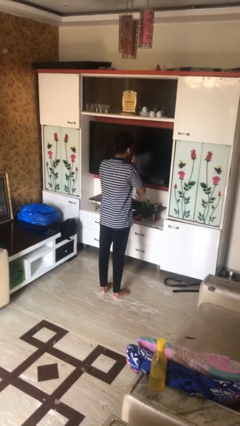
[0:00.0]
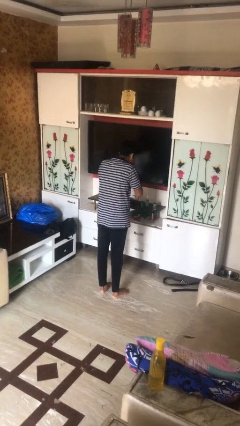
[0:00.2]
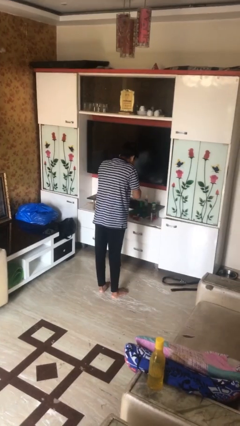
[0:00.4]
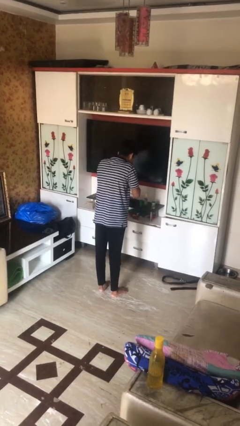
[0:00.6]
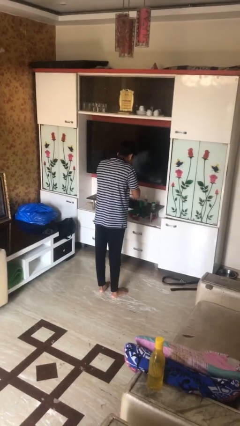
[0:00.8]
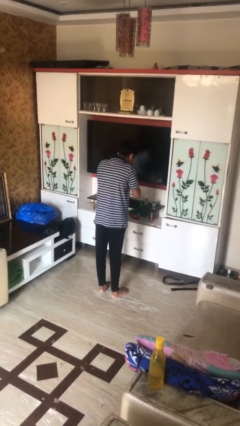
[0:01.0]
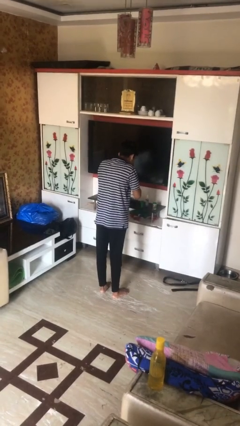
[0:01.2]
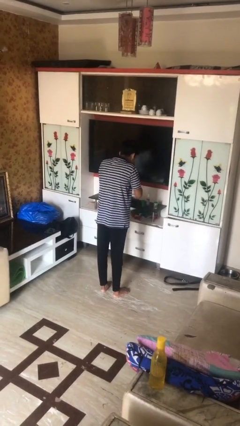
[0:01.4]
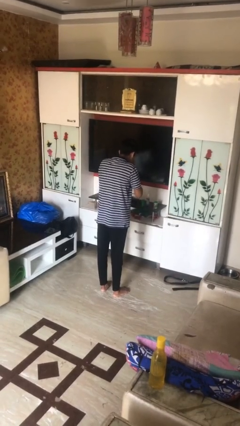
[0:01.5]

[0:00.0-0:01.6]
person sneezes into hand

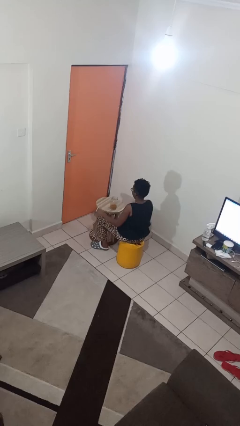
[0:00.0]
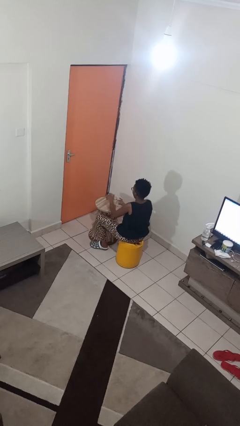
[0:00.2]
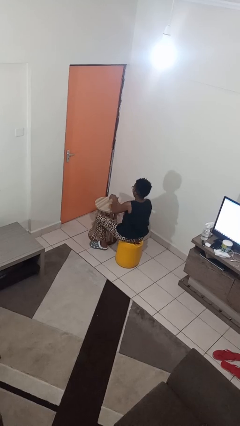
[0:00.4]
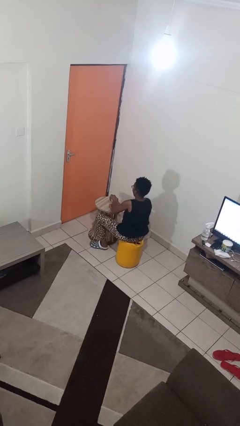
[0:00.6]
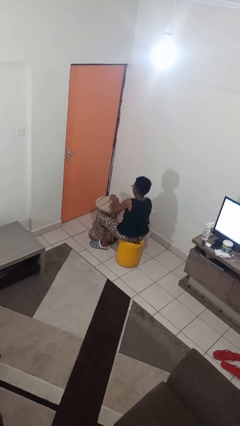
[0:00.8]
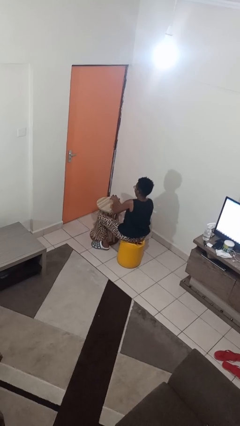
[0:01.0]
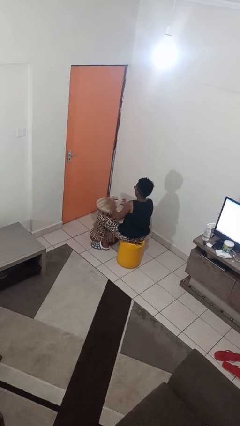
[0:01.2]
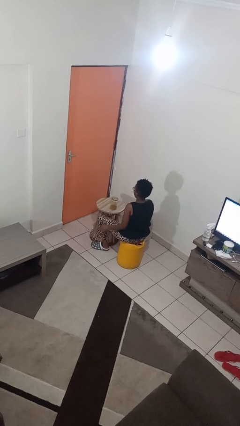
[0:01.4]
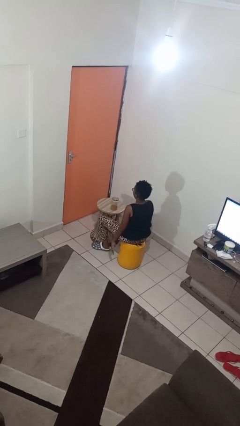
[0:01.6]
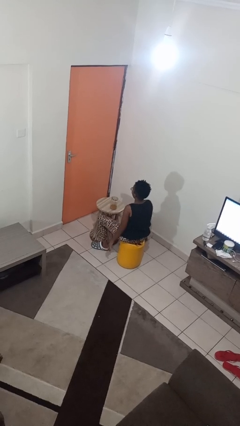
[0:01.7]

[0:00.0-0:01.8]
person closes jar

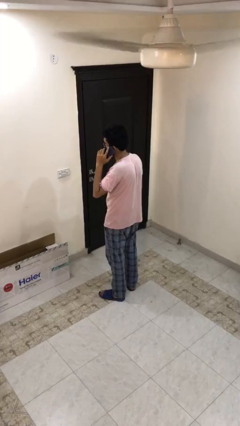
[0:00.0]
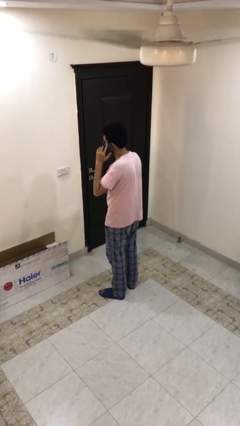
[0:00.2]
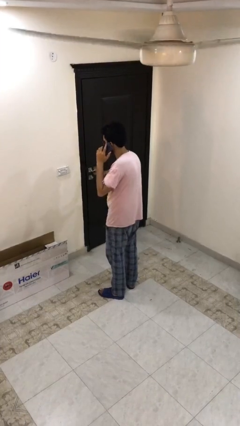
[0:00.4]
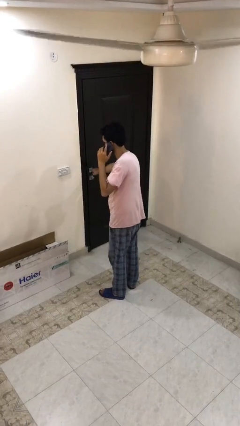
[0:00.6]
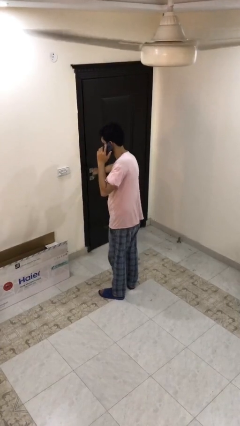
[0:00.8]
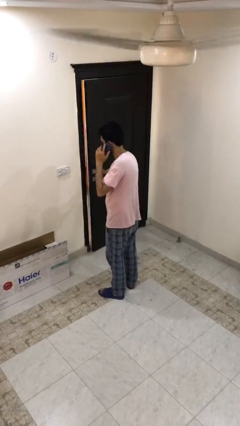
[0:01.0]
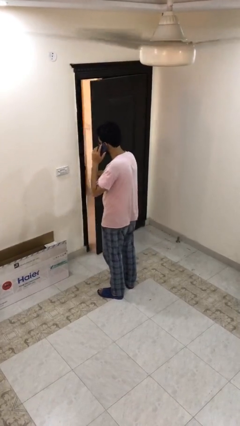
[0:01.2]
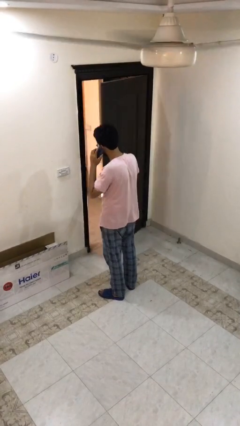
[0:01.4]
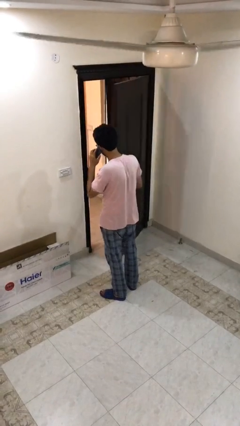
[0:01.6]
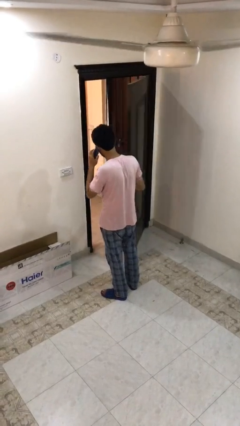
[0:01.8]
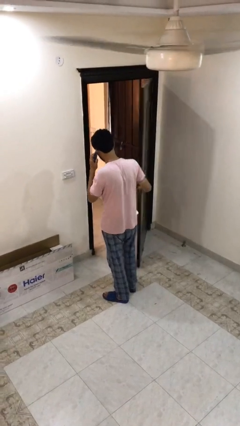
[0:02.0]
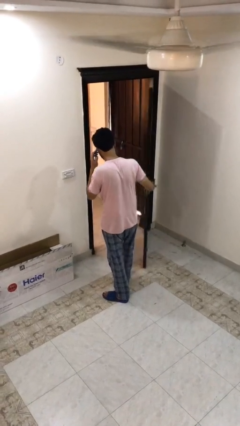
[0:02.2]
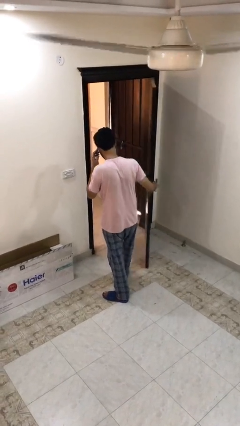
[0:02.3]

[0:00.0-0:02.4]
person opens facility door

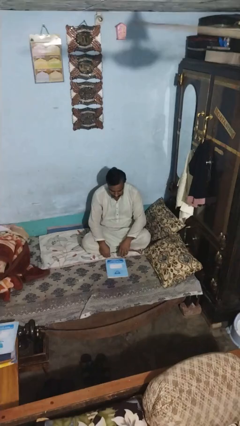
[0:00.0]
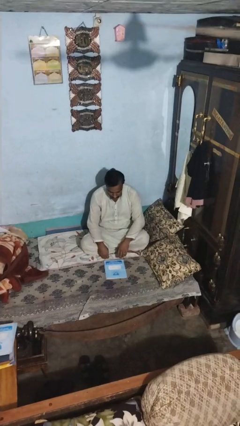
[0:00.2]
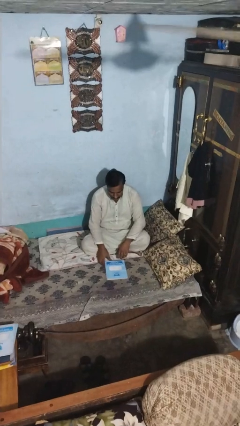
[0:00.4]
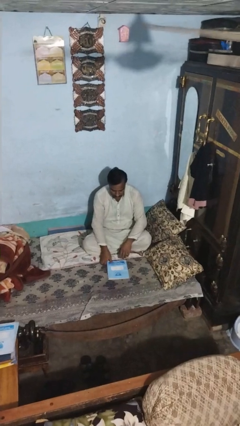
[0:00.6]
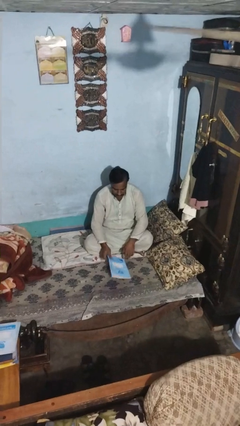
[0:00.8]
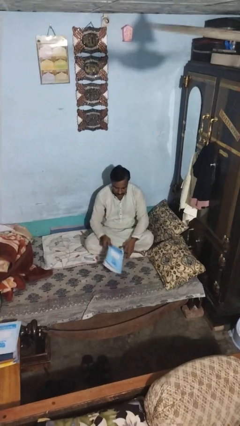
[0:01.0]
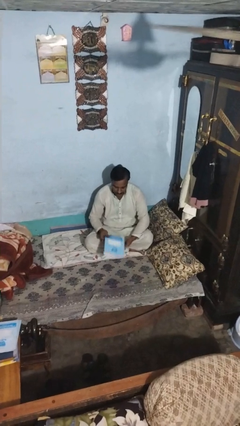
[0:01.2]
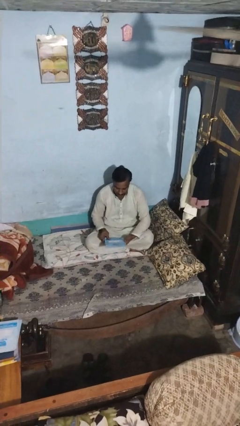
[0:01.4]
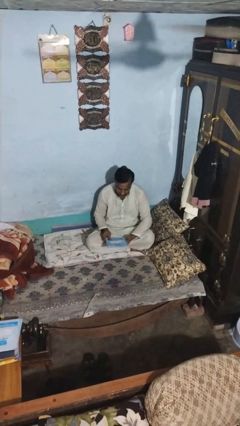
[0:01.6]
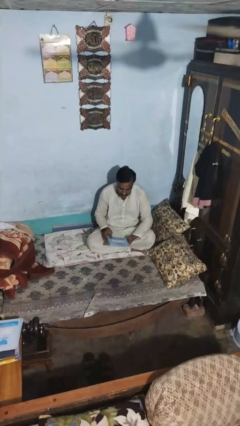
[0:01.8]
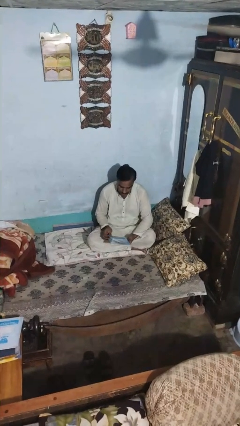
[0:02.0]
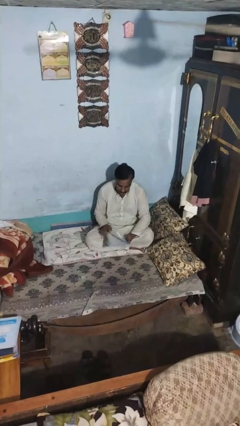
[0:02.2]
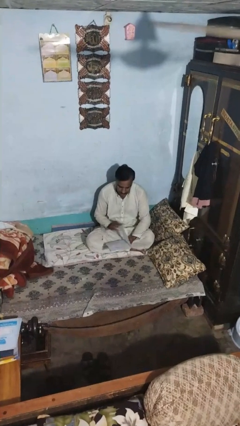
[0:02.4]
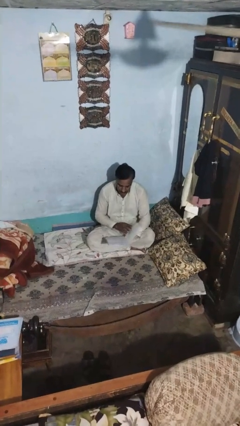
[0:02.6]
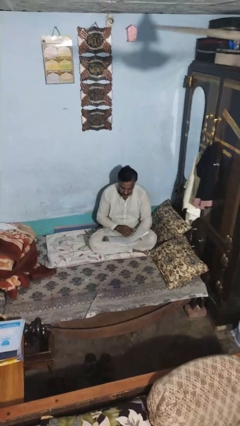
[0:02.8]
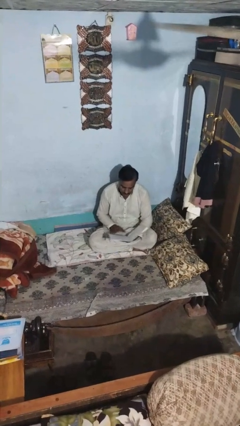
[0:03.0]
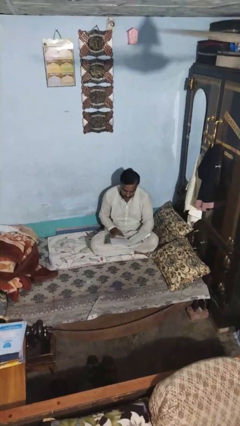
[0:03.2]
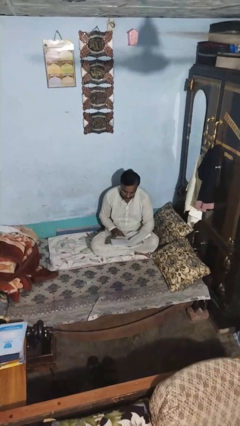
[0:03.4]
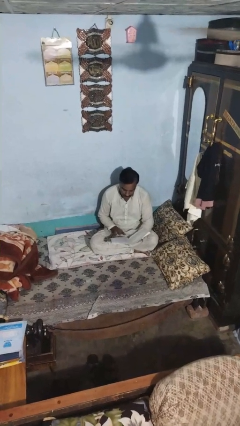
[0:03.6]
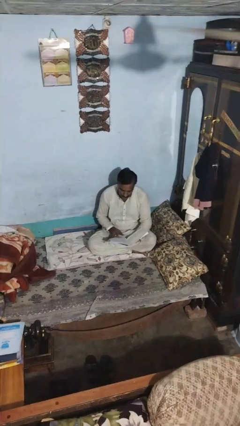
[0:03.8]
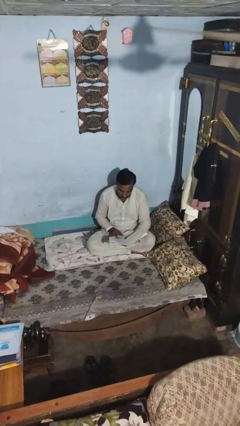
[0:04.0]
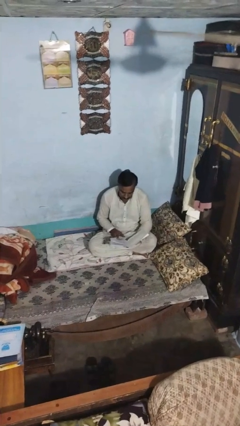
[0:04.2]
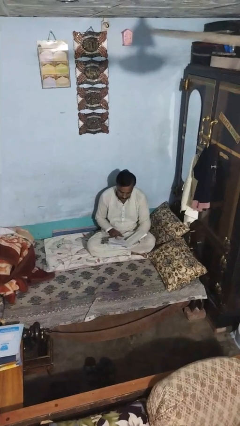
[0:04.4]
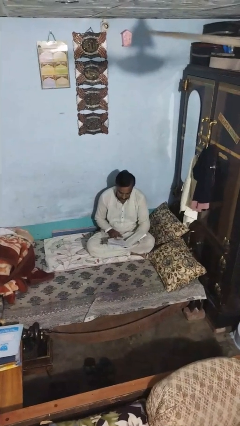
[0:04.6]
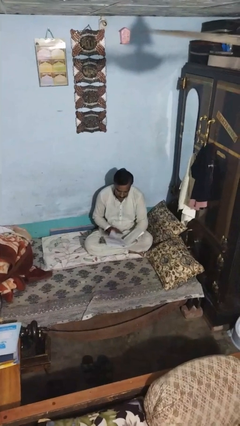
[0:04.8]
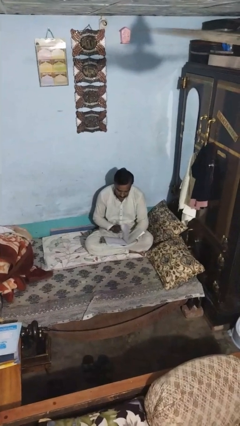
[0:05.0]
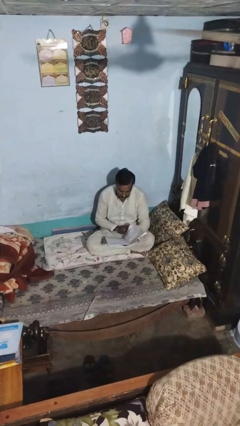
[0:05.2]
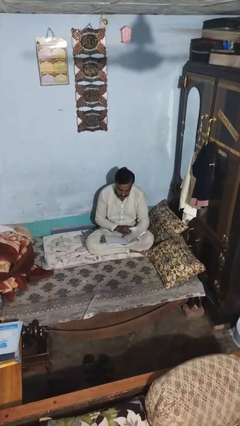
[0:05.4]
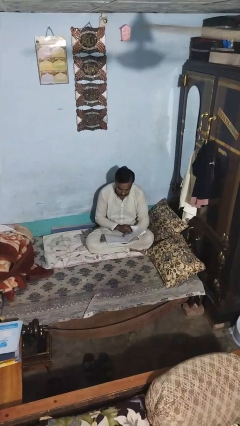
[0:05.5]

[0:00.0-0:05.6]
person reads book

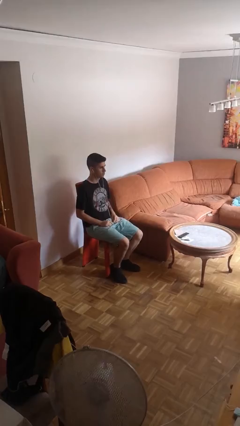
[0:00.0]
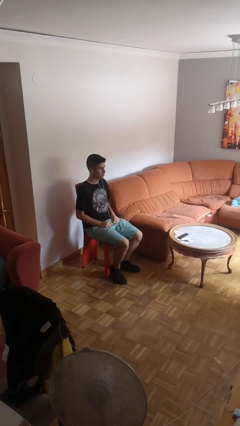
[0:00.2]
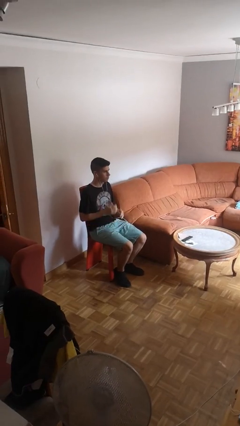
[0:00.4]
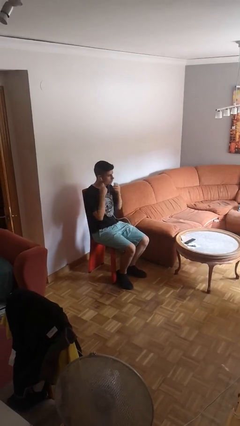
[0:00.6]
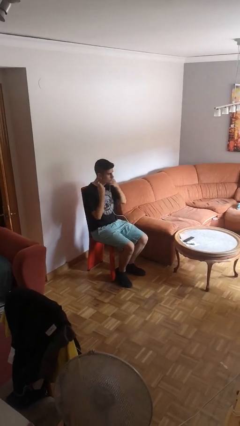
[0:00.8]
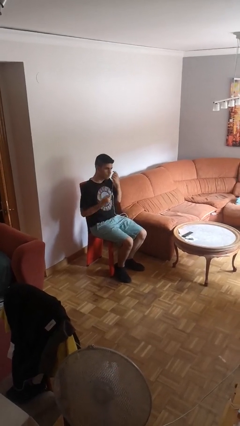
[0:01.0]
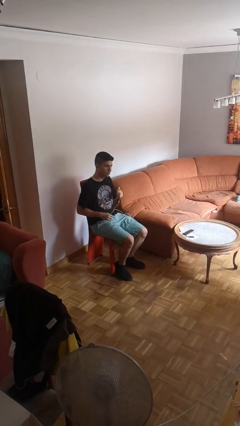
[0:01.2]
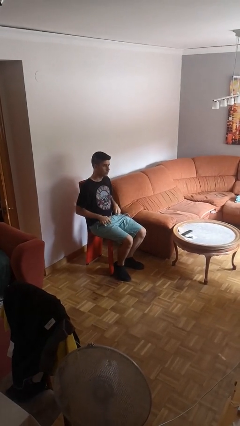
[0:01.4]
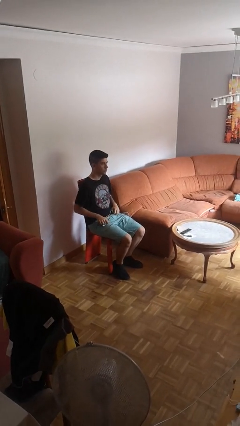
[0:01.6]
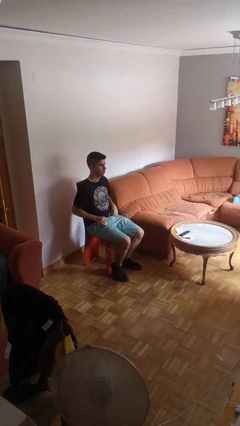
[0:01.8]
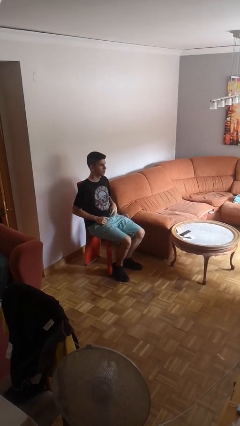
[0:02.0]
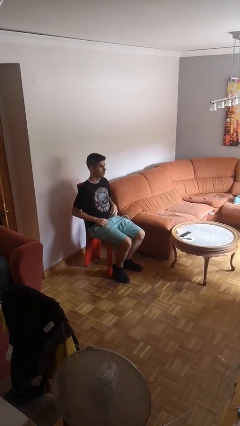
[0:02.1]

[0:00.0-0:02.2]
person takes off headphones

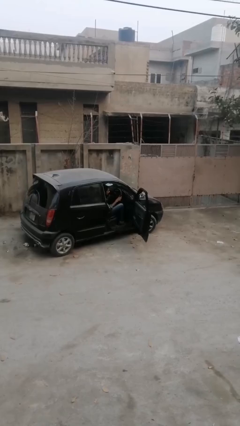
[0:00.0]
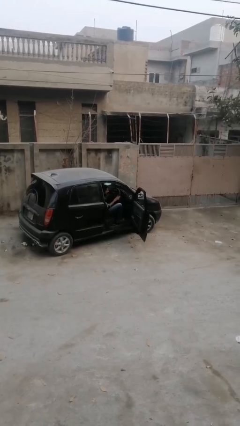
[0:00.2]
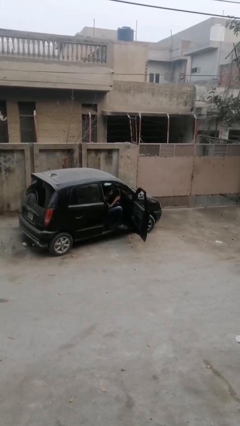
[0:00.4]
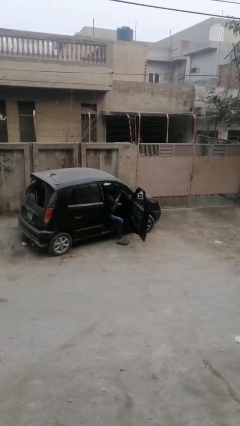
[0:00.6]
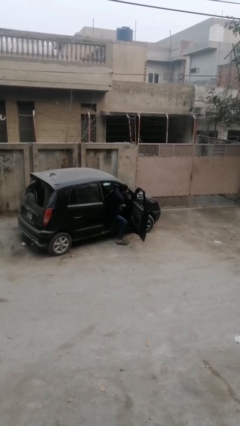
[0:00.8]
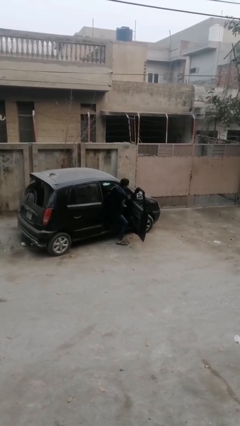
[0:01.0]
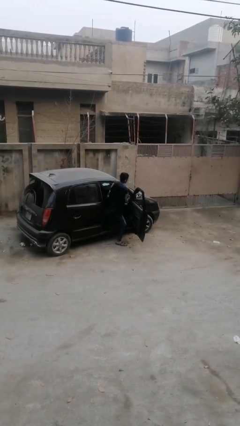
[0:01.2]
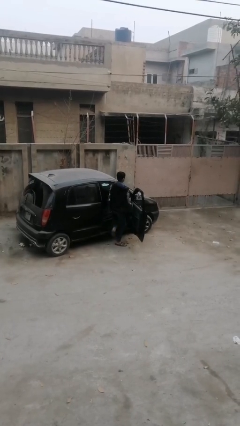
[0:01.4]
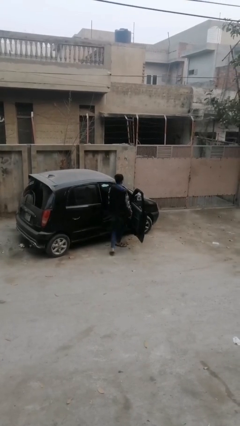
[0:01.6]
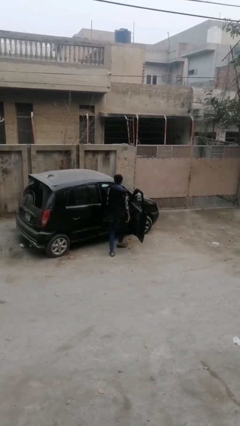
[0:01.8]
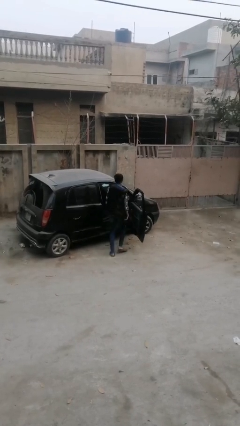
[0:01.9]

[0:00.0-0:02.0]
person exits car

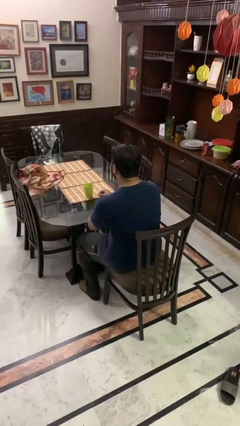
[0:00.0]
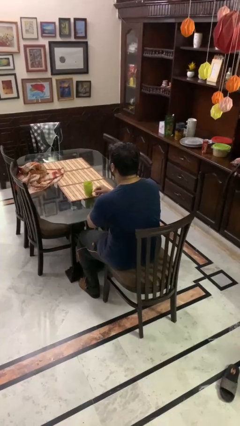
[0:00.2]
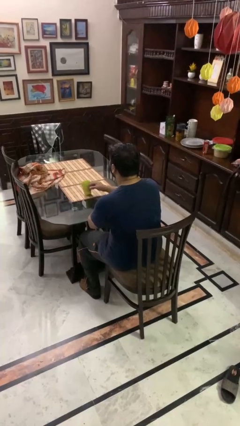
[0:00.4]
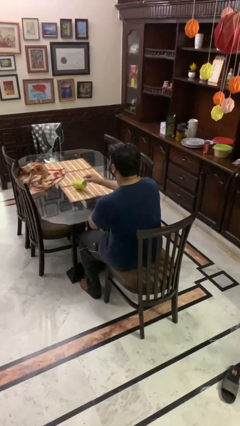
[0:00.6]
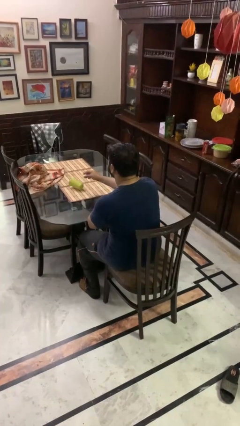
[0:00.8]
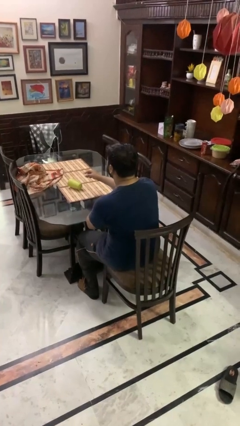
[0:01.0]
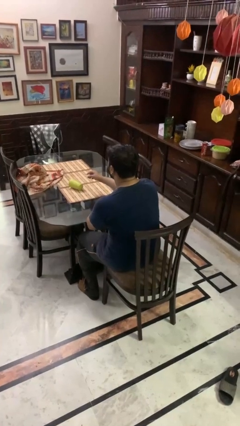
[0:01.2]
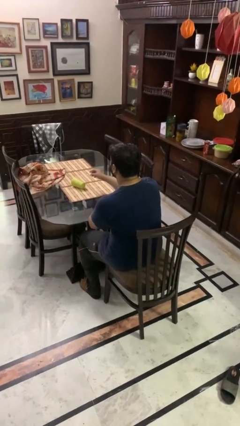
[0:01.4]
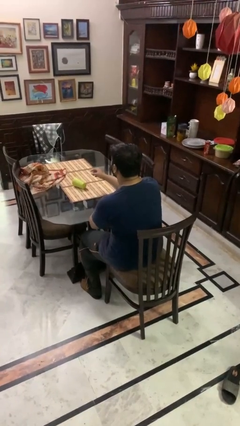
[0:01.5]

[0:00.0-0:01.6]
person knocks over glass
